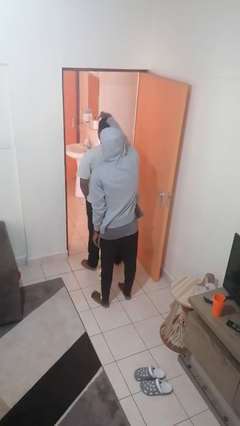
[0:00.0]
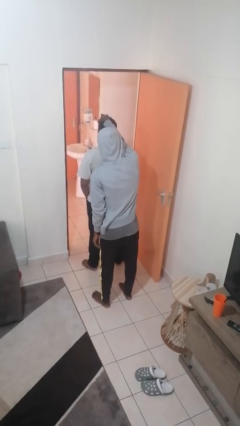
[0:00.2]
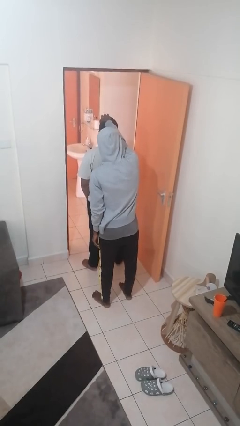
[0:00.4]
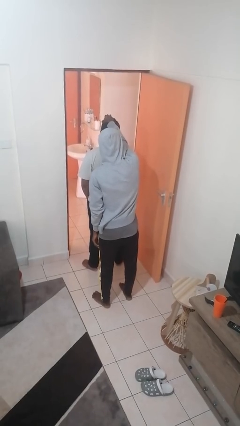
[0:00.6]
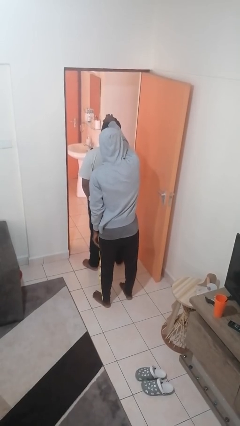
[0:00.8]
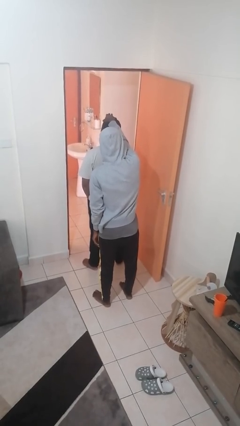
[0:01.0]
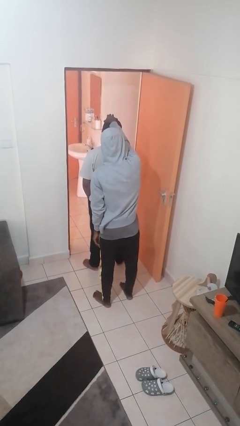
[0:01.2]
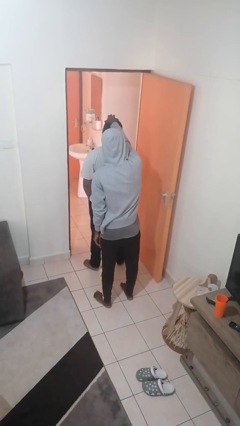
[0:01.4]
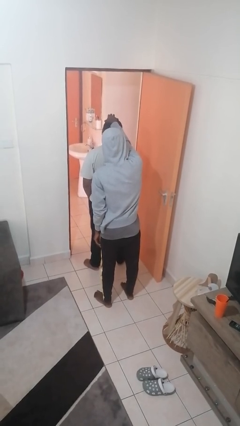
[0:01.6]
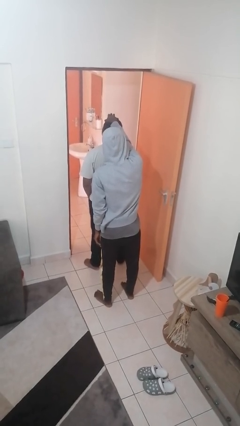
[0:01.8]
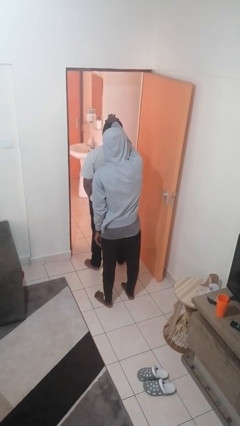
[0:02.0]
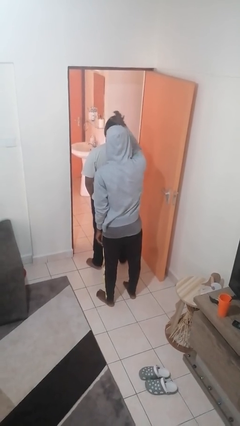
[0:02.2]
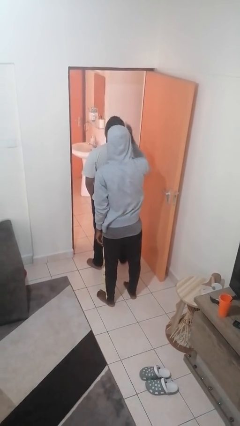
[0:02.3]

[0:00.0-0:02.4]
person grabs person by hair

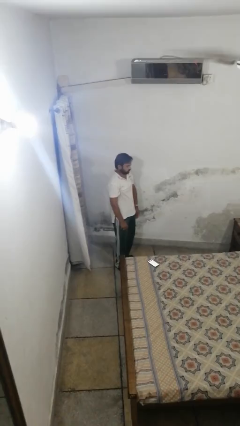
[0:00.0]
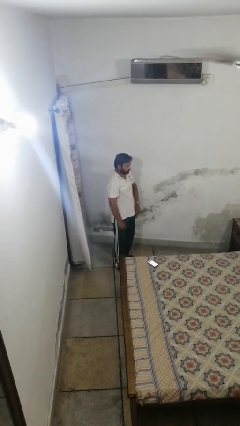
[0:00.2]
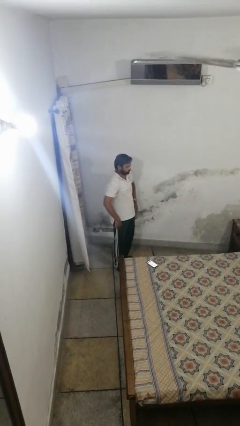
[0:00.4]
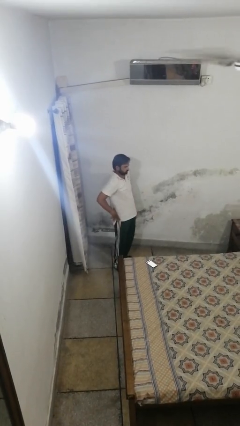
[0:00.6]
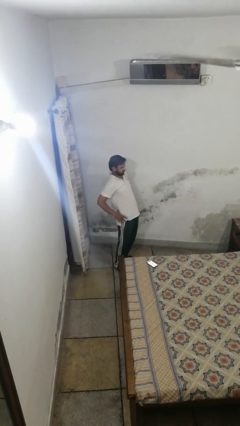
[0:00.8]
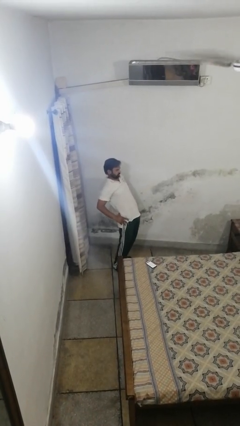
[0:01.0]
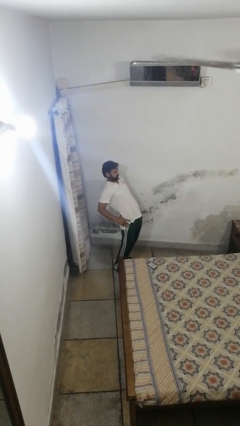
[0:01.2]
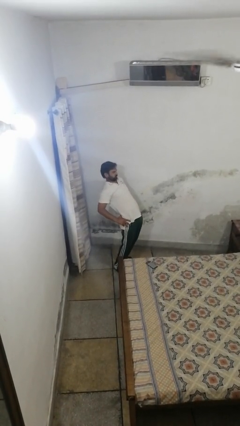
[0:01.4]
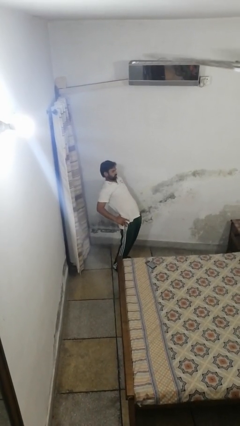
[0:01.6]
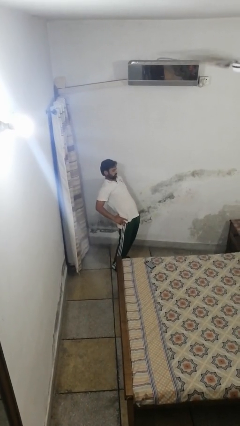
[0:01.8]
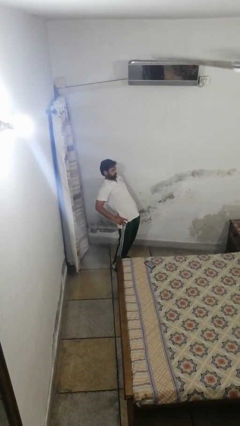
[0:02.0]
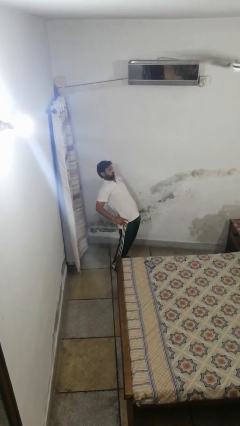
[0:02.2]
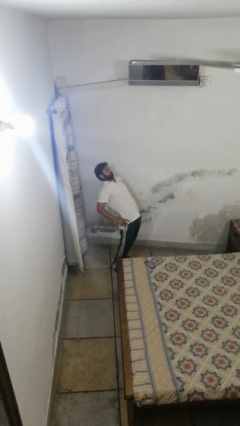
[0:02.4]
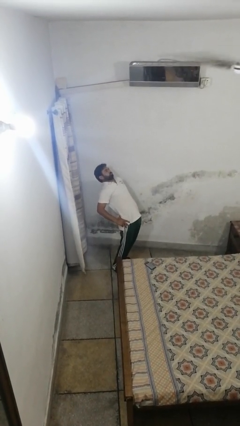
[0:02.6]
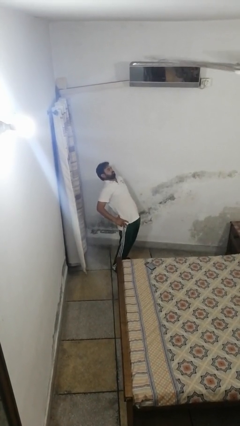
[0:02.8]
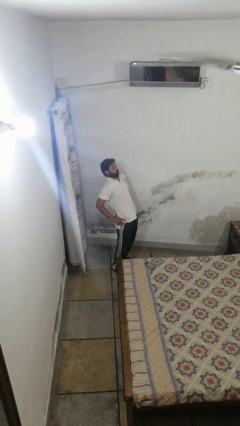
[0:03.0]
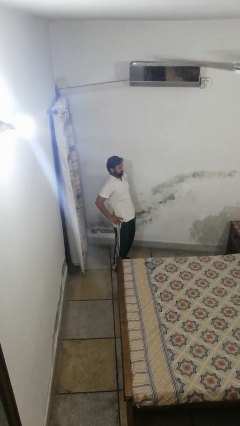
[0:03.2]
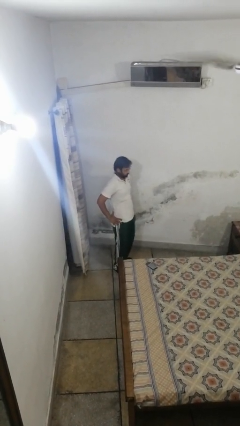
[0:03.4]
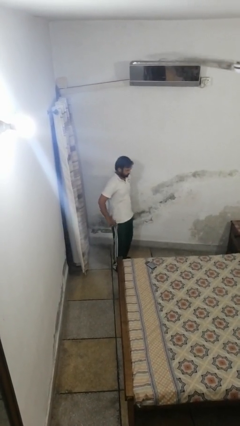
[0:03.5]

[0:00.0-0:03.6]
person stretches back

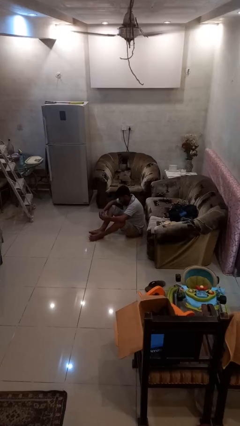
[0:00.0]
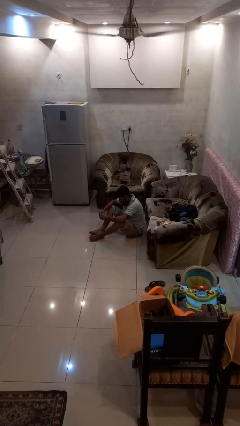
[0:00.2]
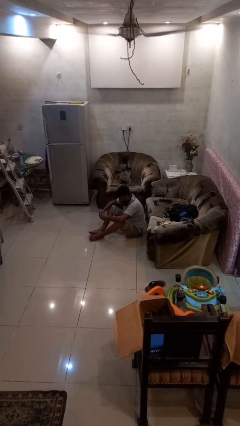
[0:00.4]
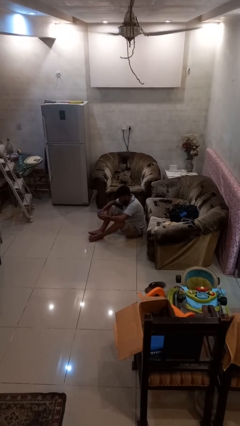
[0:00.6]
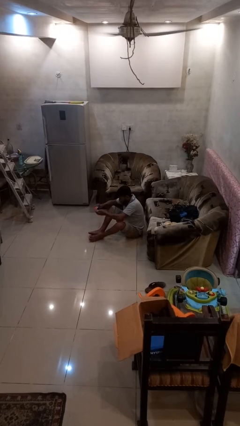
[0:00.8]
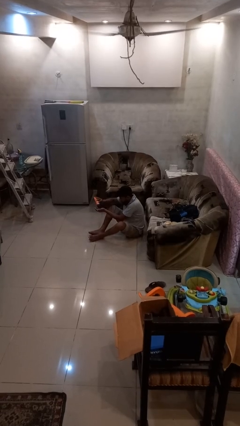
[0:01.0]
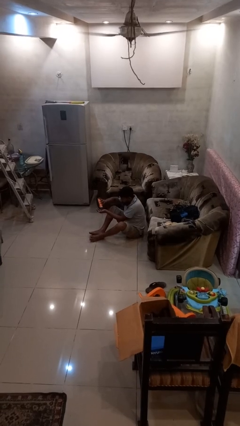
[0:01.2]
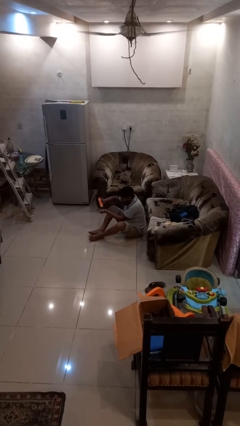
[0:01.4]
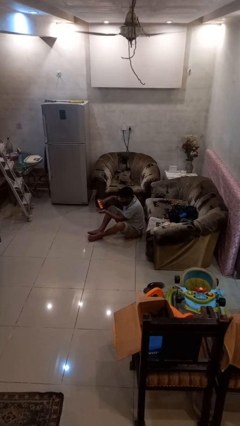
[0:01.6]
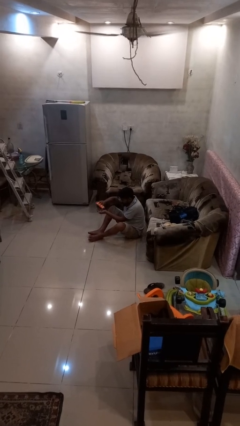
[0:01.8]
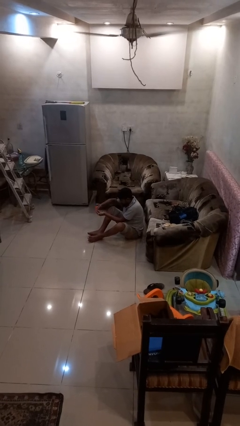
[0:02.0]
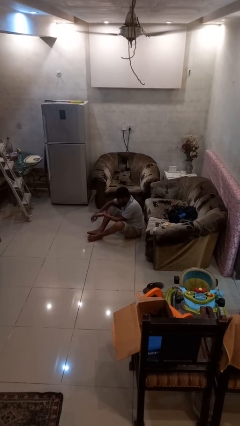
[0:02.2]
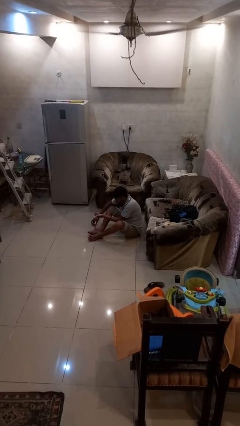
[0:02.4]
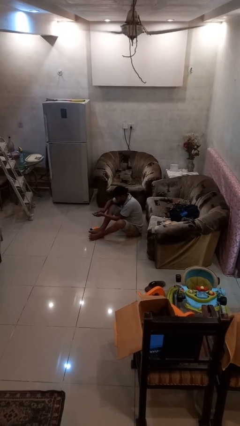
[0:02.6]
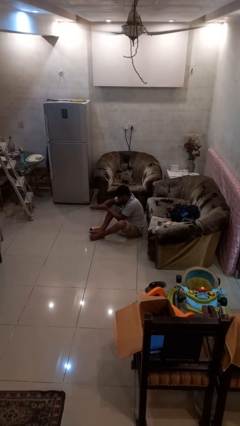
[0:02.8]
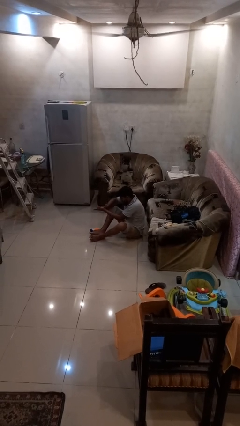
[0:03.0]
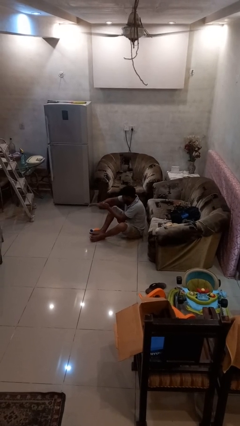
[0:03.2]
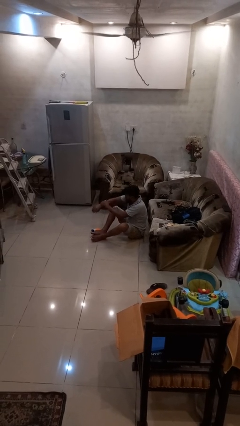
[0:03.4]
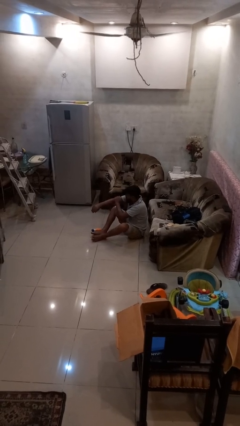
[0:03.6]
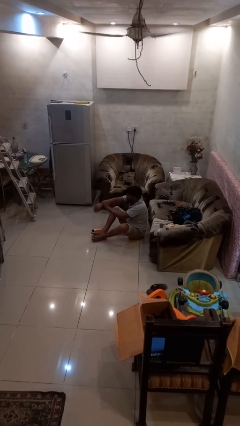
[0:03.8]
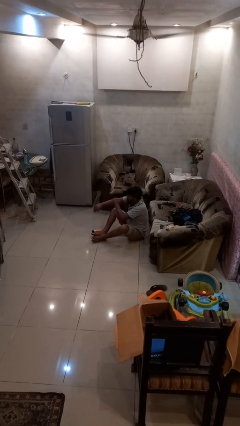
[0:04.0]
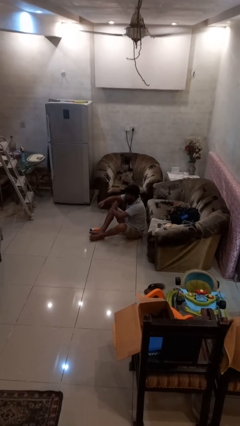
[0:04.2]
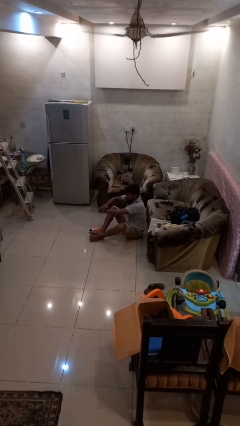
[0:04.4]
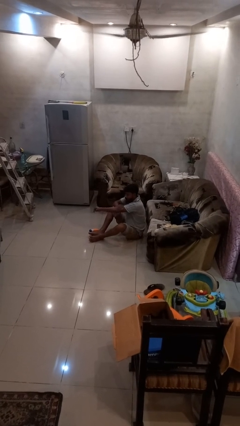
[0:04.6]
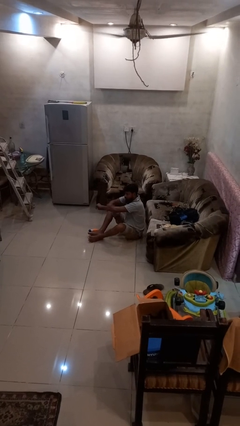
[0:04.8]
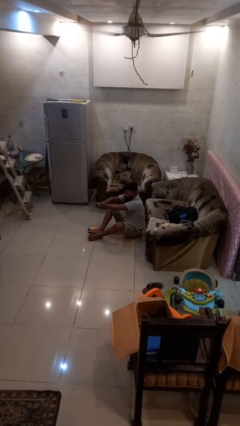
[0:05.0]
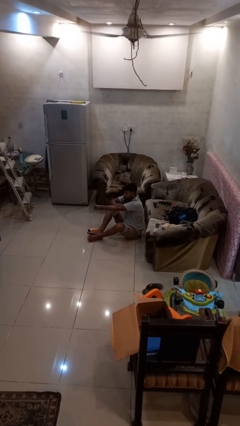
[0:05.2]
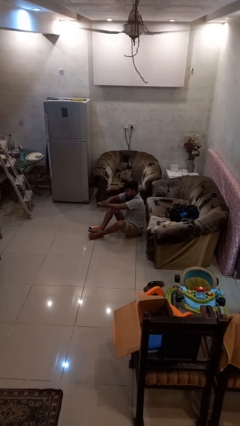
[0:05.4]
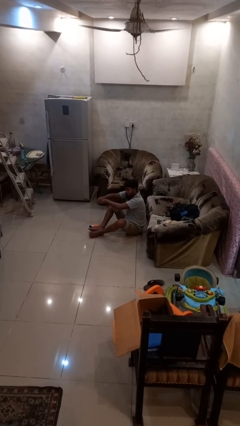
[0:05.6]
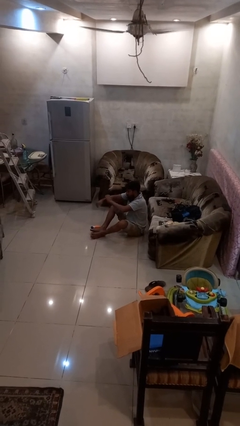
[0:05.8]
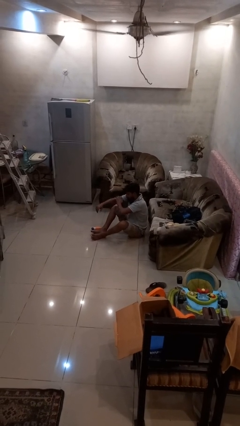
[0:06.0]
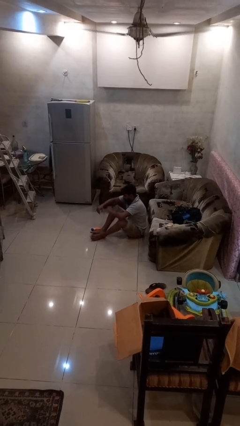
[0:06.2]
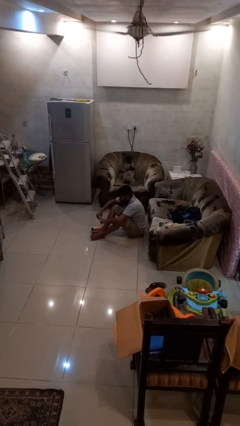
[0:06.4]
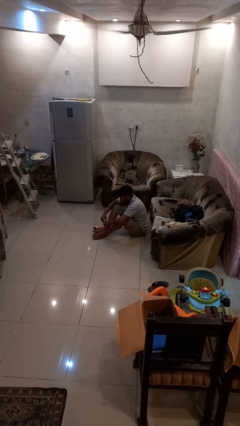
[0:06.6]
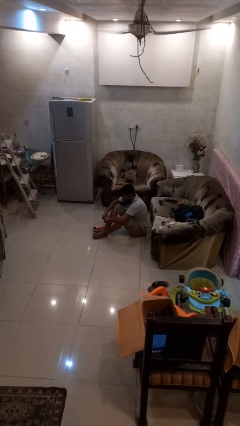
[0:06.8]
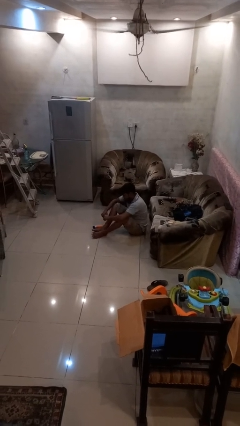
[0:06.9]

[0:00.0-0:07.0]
person applies sunscreen

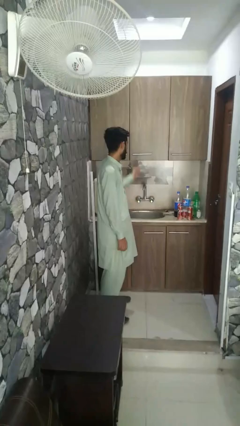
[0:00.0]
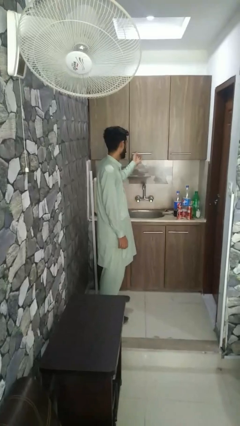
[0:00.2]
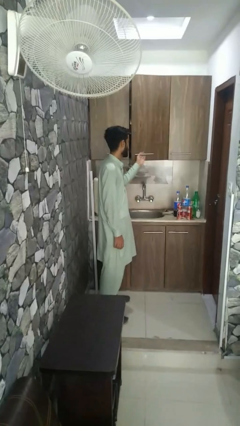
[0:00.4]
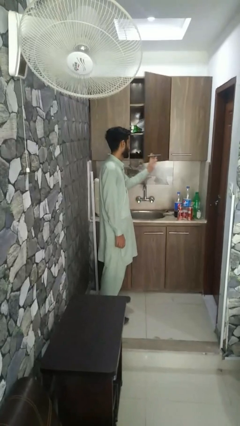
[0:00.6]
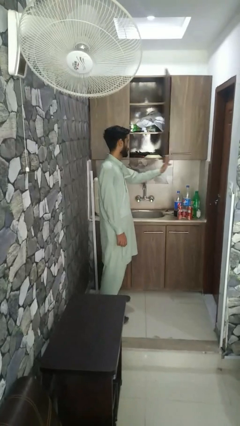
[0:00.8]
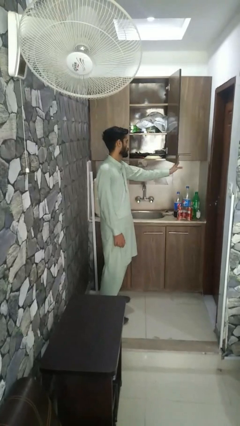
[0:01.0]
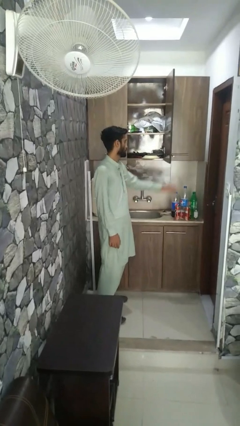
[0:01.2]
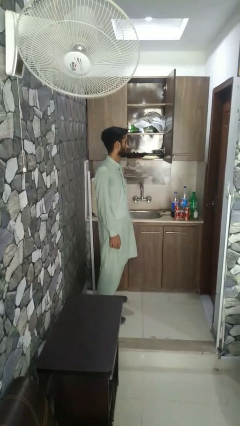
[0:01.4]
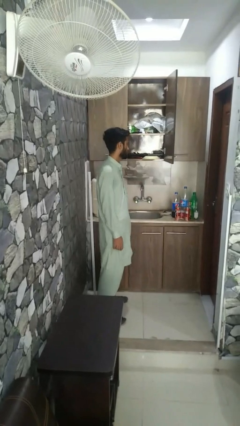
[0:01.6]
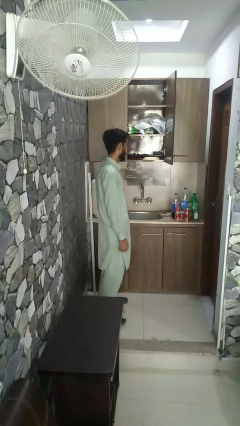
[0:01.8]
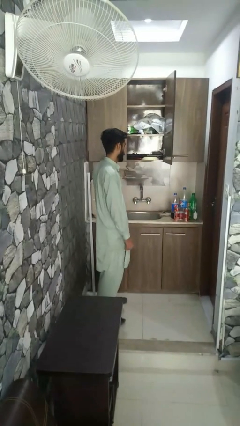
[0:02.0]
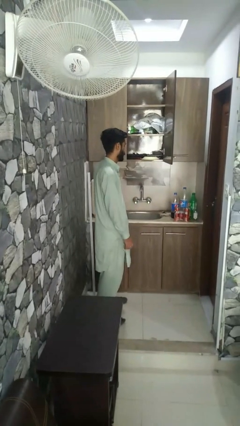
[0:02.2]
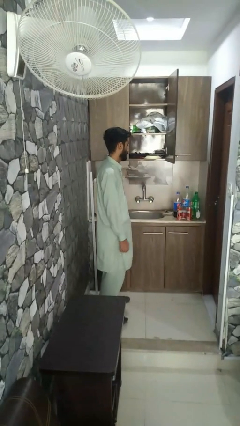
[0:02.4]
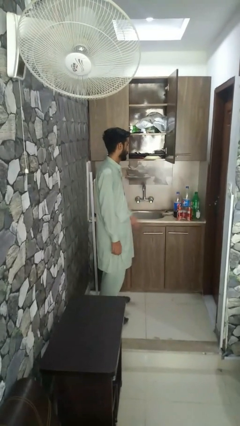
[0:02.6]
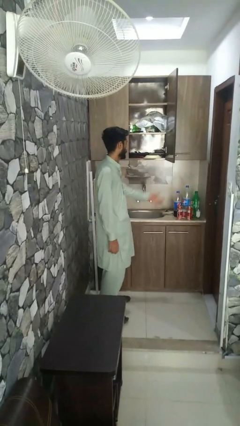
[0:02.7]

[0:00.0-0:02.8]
person opens closet door

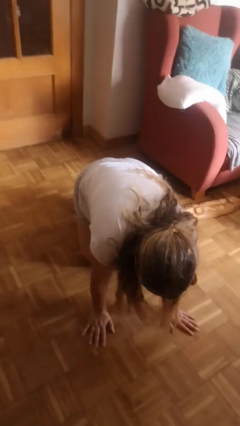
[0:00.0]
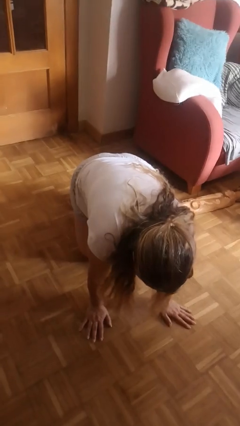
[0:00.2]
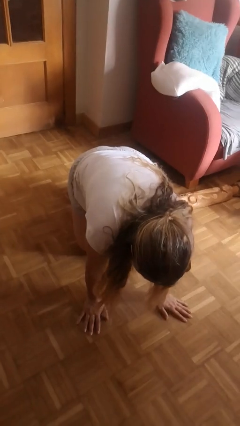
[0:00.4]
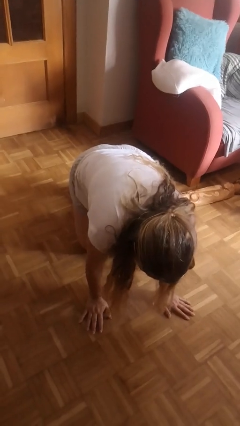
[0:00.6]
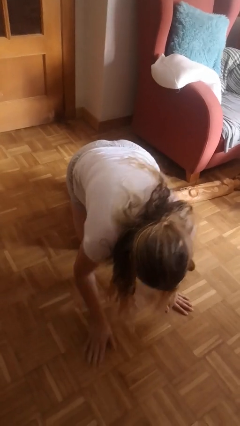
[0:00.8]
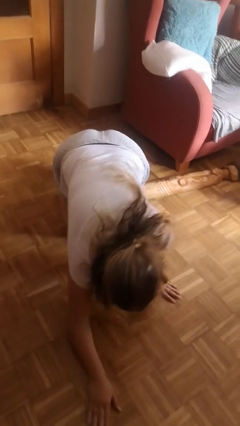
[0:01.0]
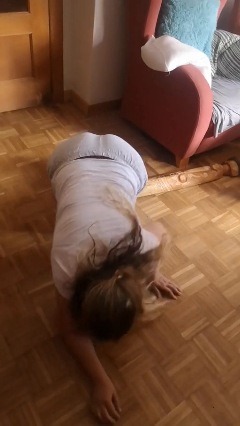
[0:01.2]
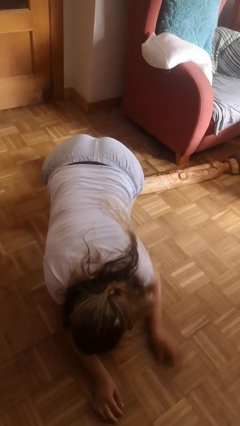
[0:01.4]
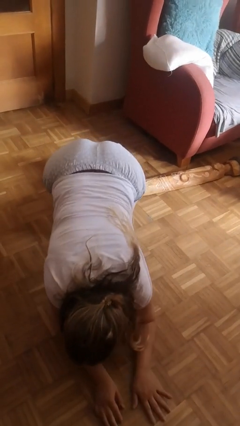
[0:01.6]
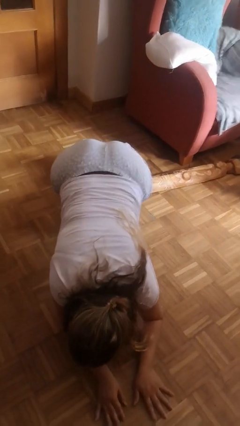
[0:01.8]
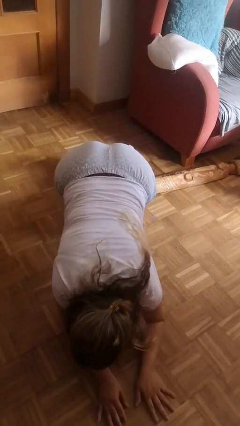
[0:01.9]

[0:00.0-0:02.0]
person lies down on floor
